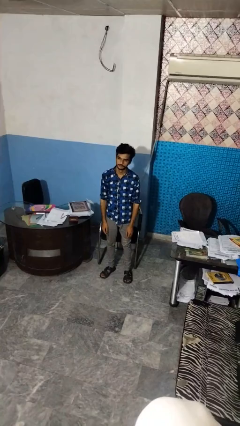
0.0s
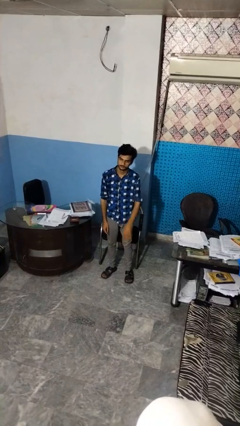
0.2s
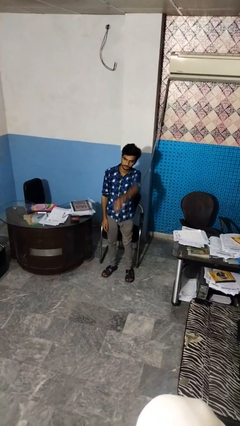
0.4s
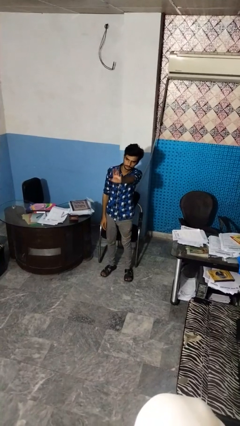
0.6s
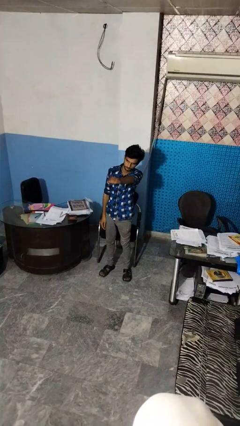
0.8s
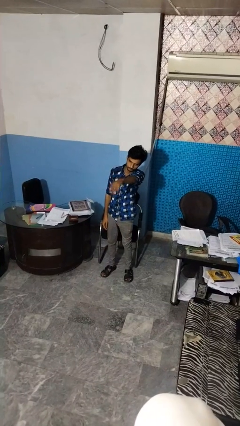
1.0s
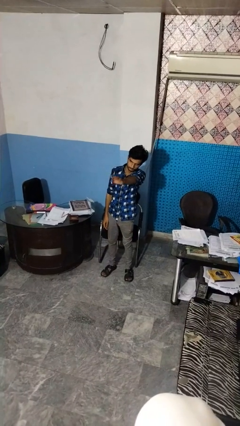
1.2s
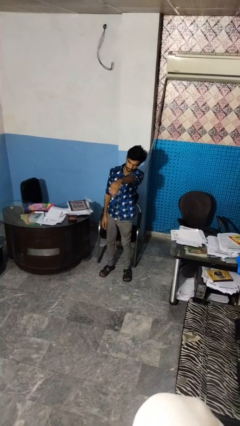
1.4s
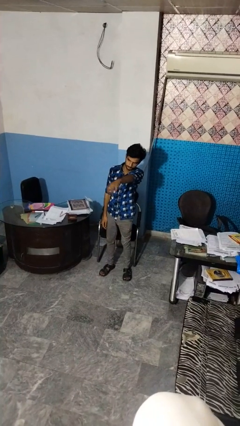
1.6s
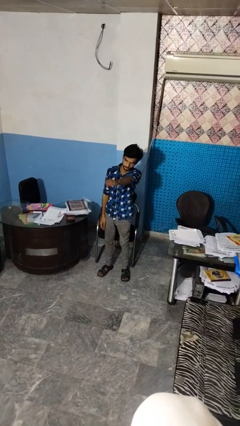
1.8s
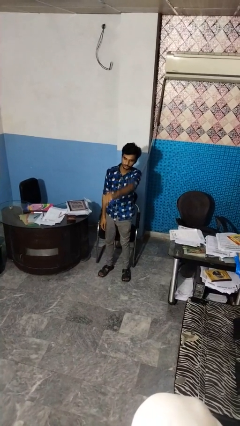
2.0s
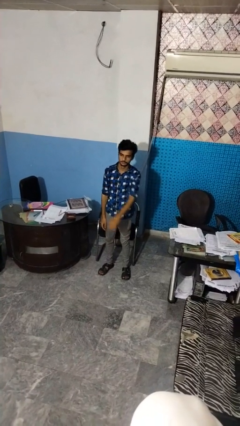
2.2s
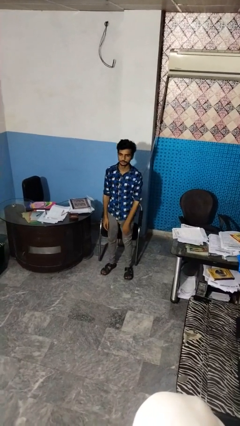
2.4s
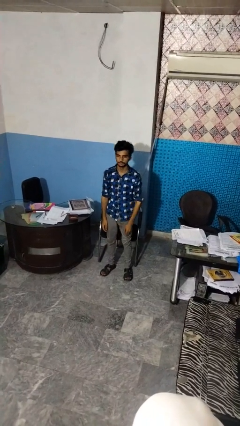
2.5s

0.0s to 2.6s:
person gestures come here

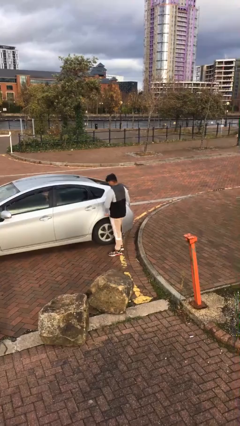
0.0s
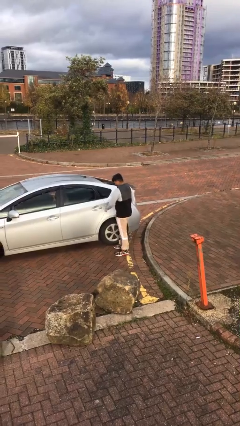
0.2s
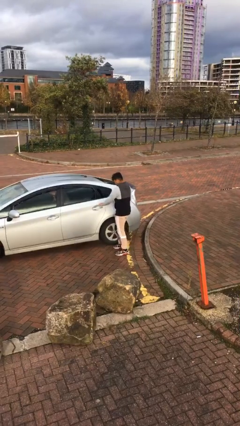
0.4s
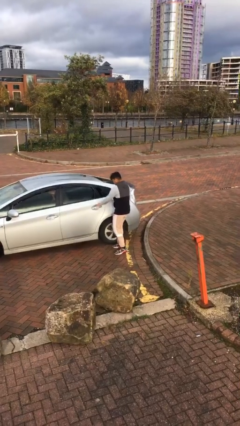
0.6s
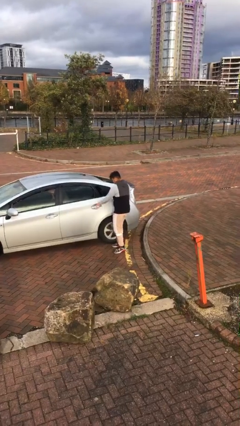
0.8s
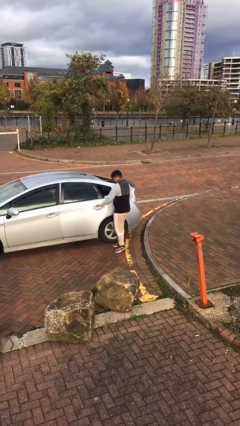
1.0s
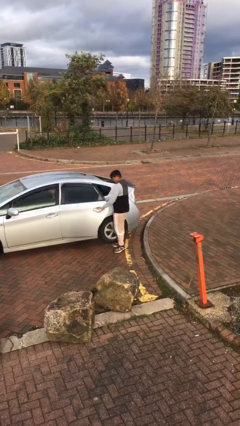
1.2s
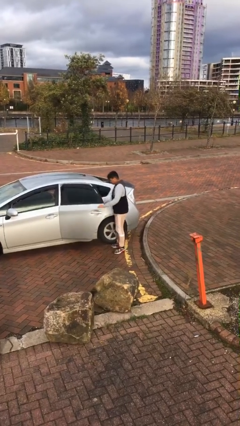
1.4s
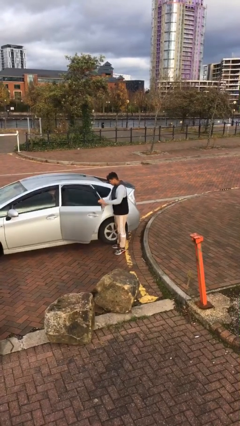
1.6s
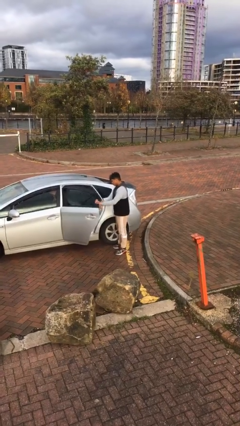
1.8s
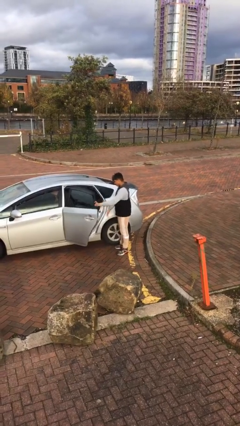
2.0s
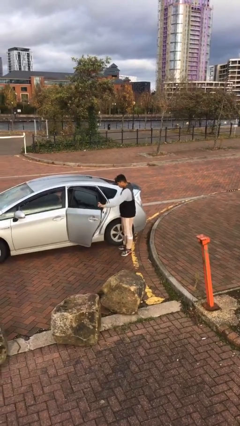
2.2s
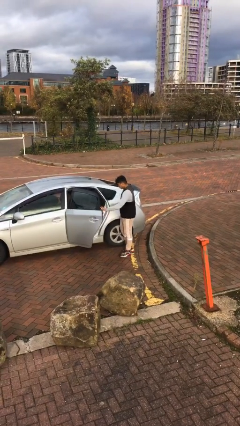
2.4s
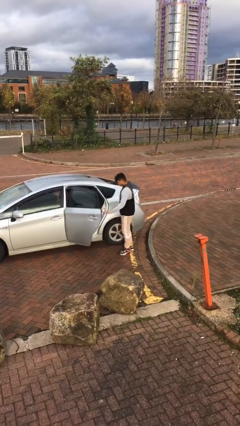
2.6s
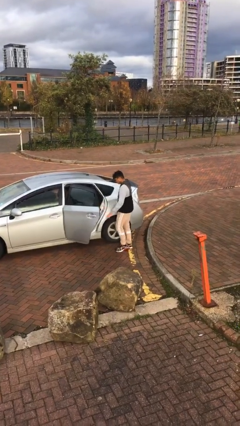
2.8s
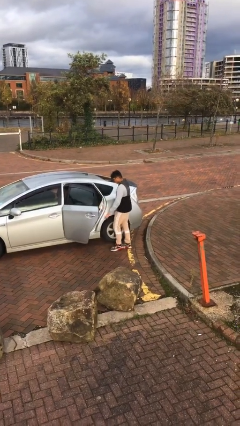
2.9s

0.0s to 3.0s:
person opens car door

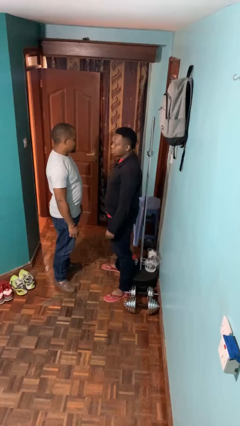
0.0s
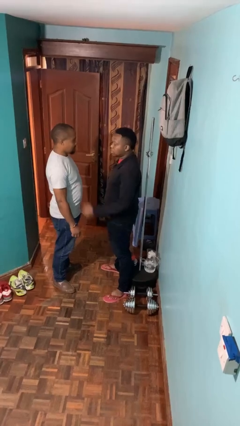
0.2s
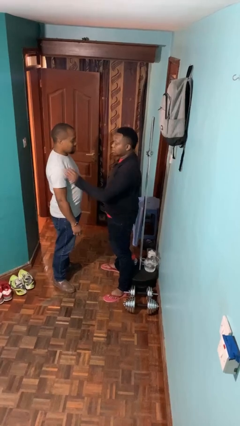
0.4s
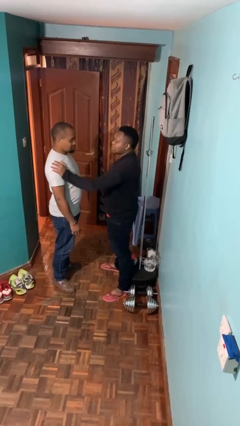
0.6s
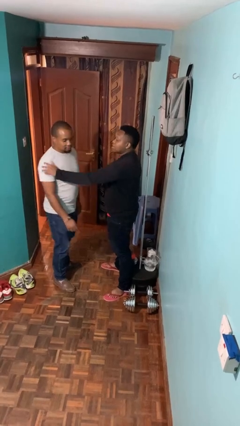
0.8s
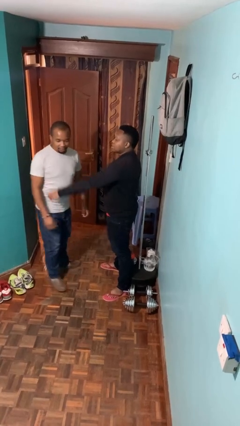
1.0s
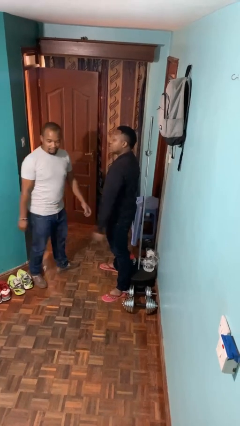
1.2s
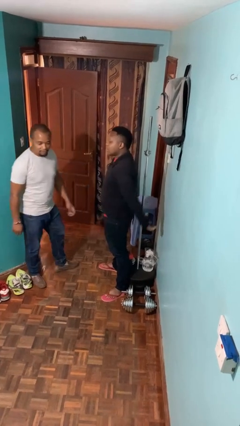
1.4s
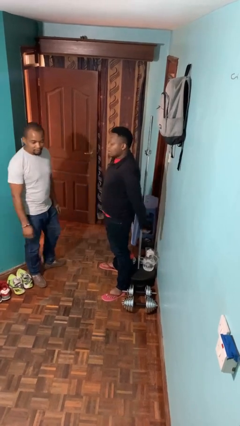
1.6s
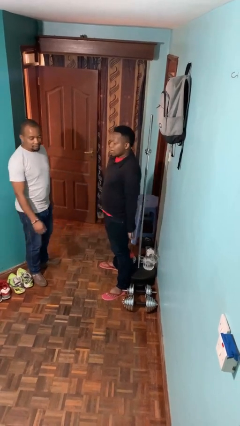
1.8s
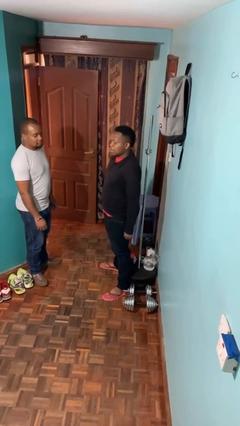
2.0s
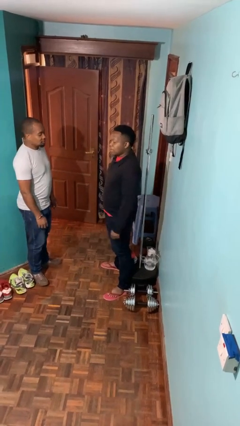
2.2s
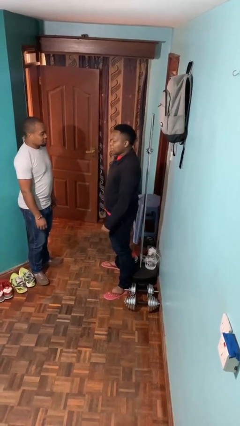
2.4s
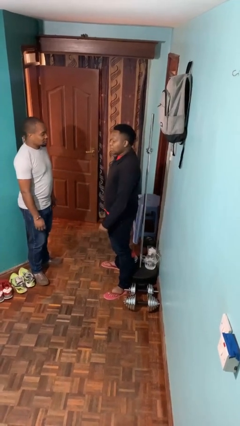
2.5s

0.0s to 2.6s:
person shoves person

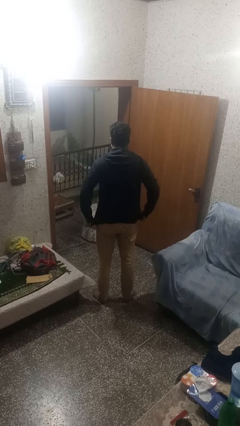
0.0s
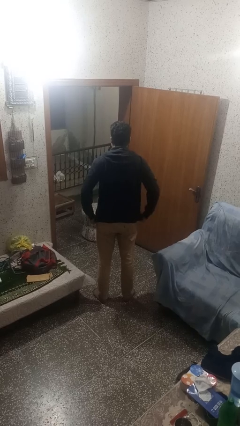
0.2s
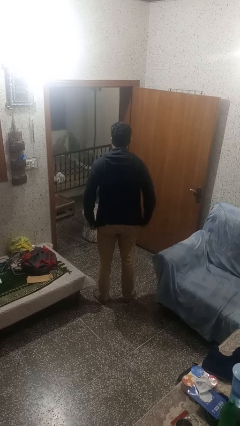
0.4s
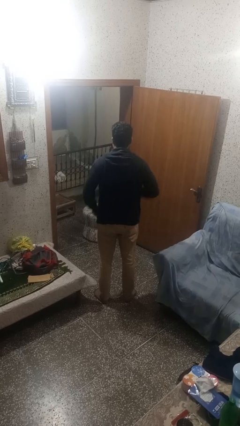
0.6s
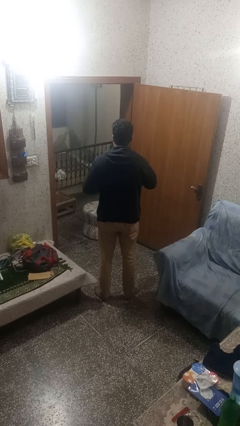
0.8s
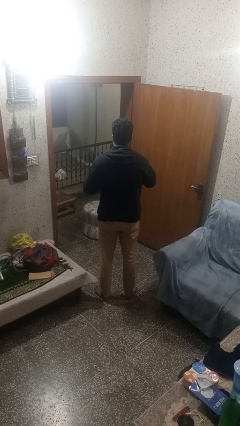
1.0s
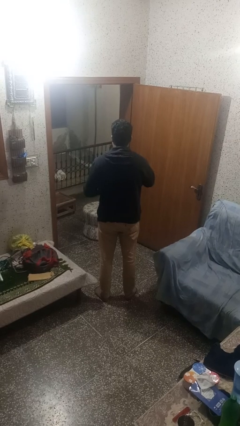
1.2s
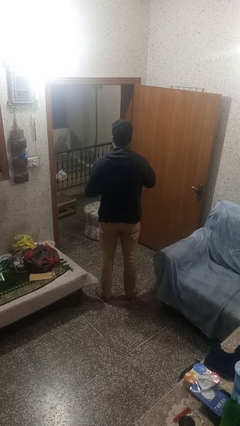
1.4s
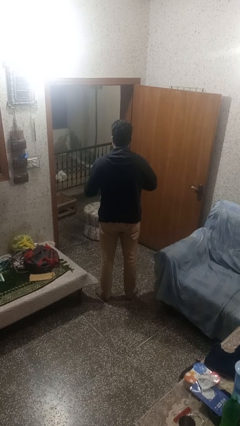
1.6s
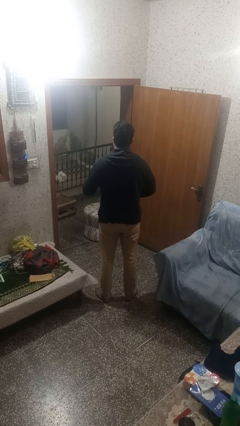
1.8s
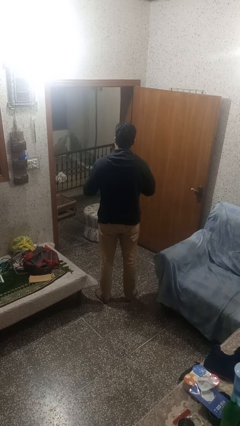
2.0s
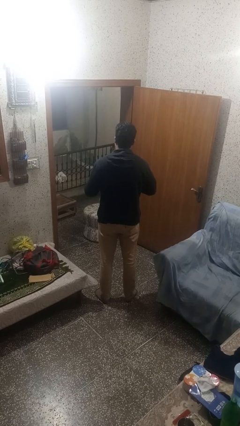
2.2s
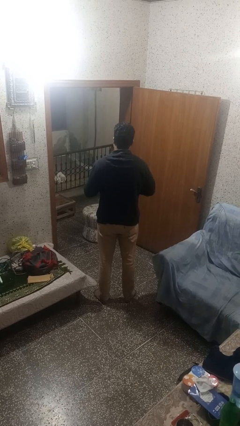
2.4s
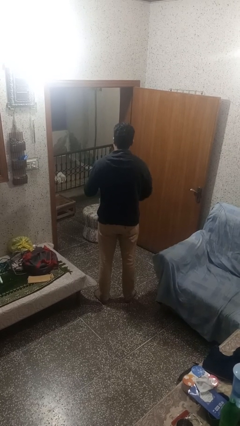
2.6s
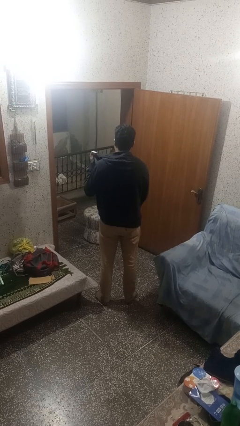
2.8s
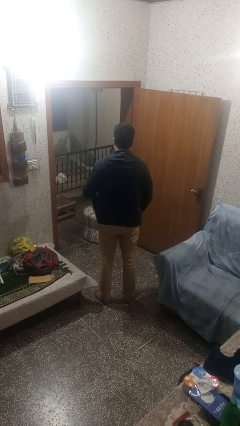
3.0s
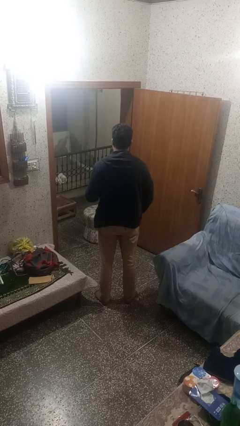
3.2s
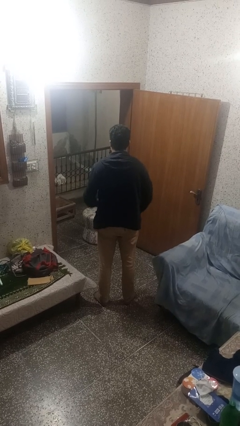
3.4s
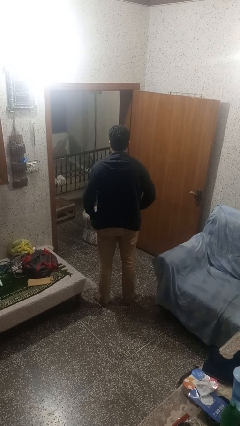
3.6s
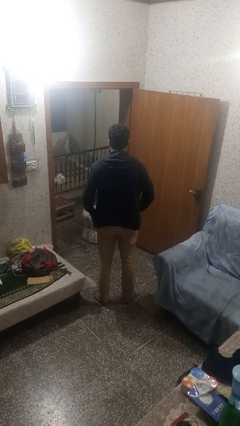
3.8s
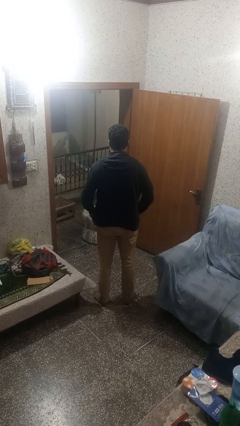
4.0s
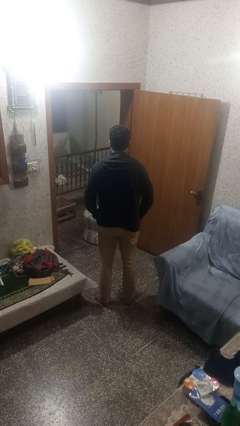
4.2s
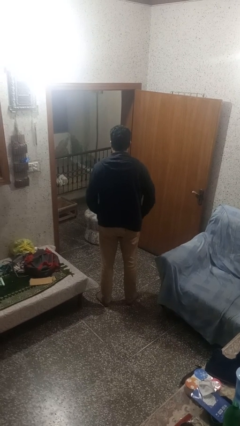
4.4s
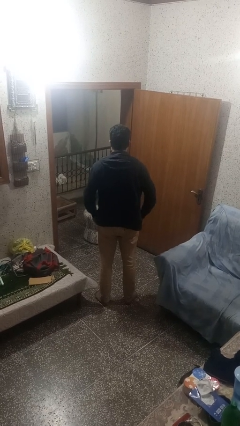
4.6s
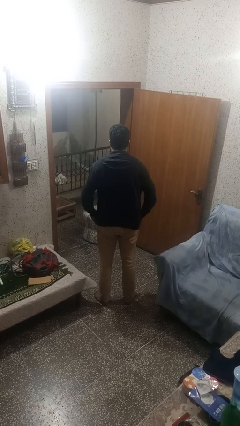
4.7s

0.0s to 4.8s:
person unzips jacket

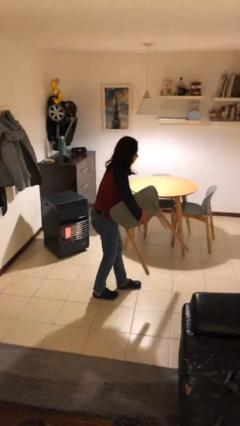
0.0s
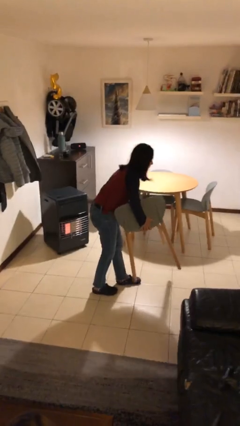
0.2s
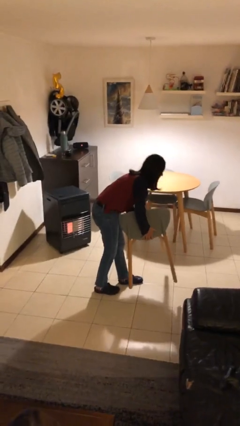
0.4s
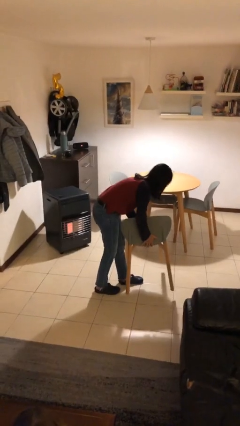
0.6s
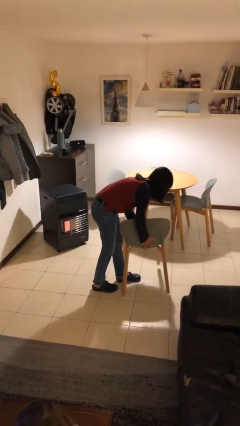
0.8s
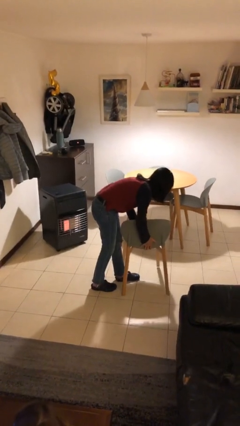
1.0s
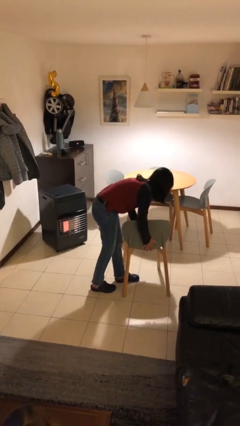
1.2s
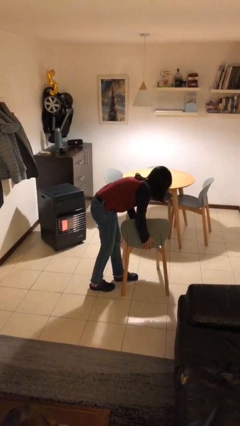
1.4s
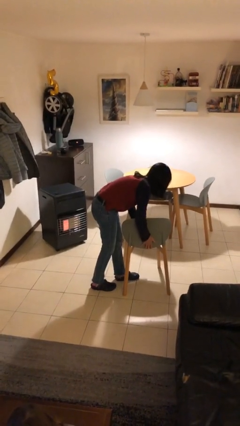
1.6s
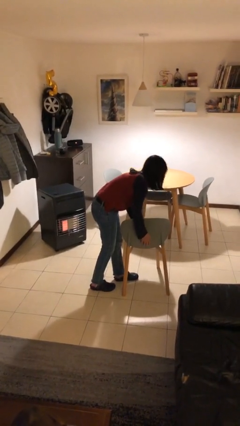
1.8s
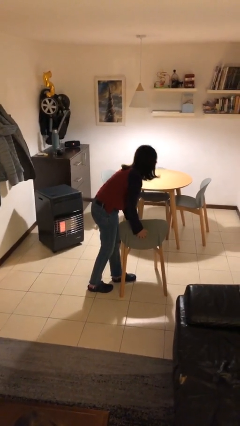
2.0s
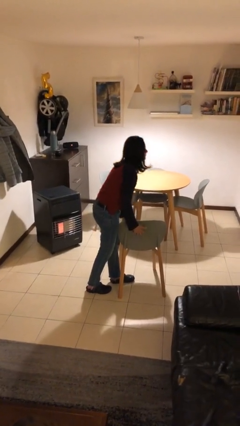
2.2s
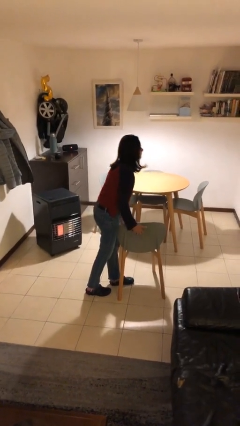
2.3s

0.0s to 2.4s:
person puts down object on floor

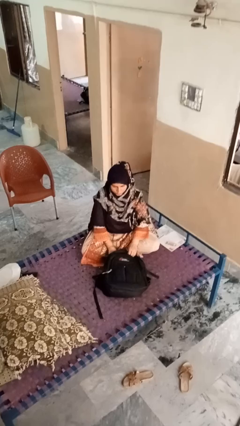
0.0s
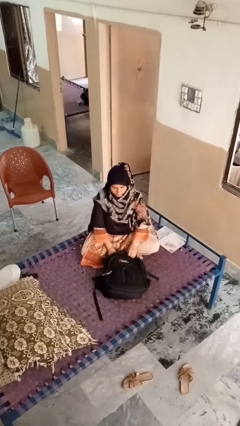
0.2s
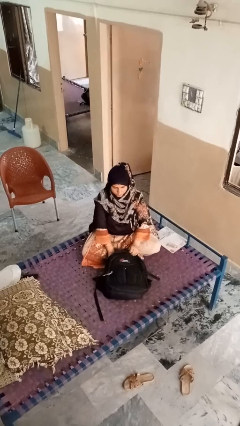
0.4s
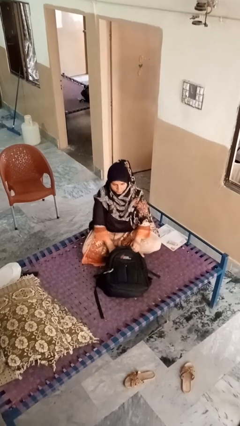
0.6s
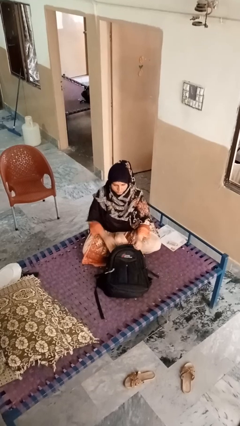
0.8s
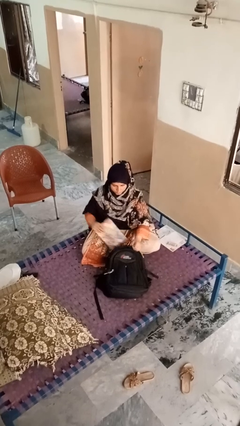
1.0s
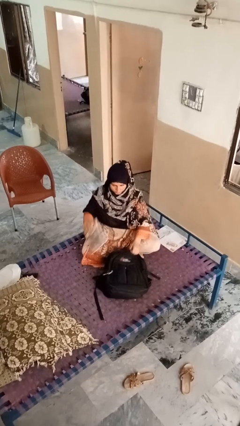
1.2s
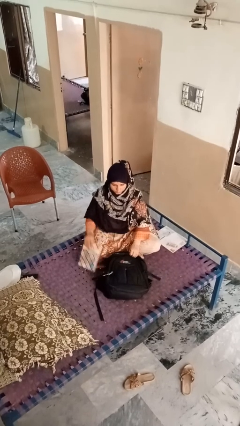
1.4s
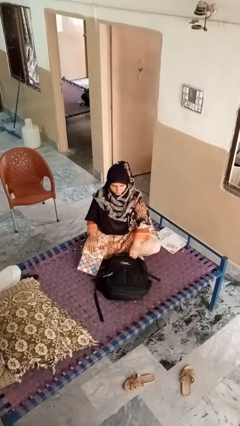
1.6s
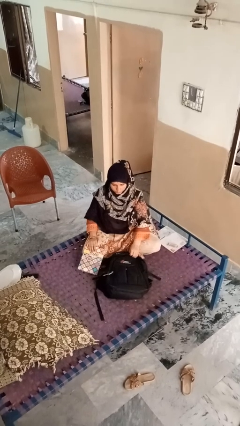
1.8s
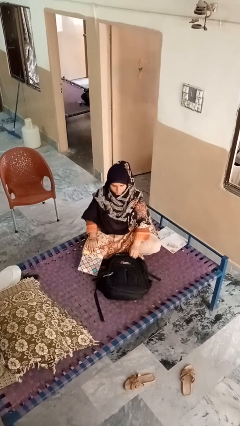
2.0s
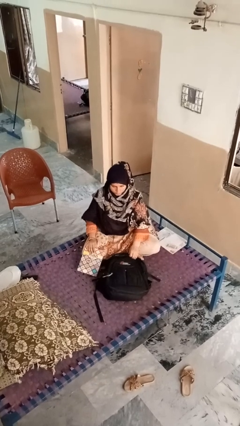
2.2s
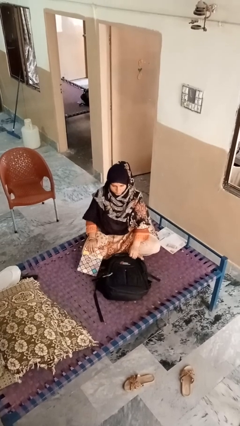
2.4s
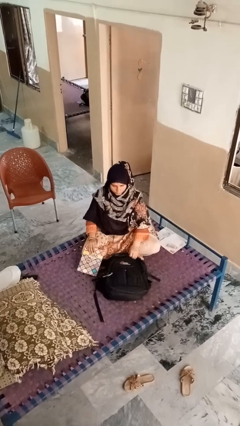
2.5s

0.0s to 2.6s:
person takes object from bag
